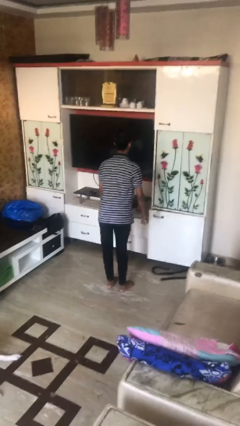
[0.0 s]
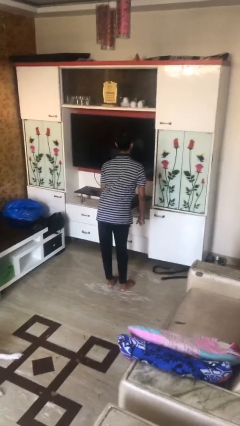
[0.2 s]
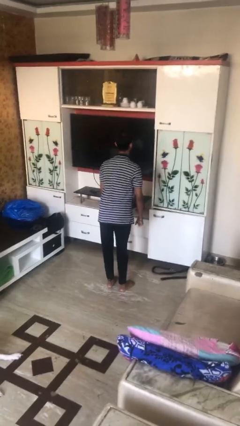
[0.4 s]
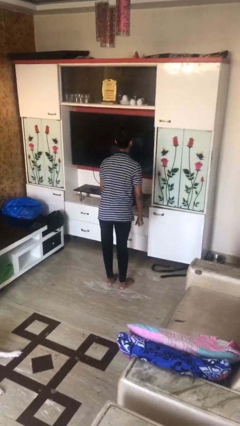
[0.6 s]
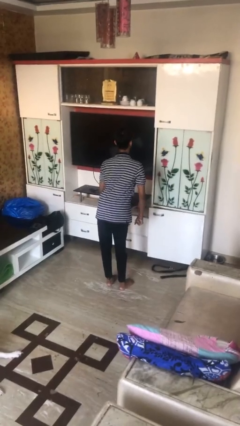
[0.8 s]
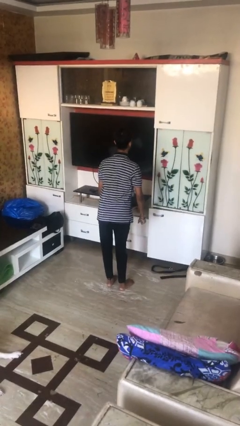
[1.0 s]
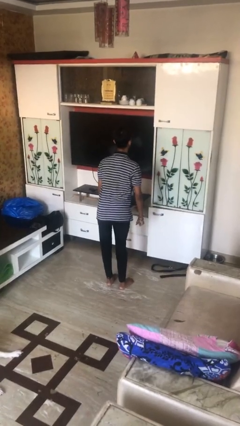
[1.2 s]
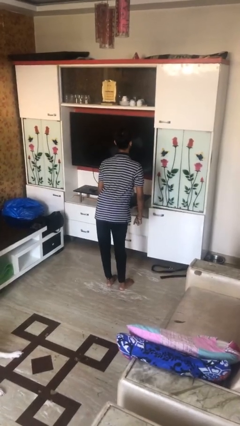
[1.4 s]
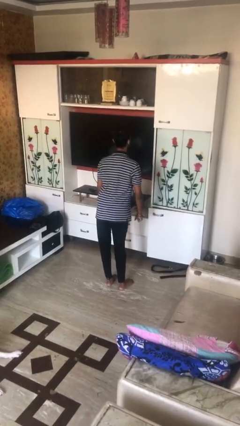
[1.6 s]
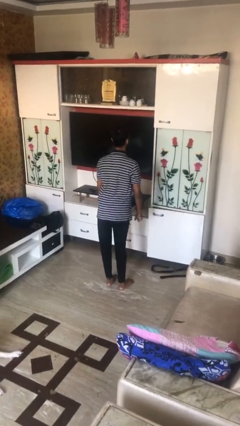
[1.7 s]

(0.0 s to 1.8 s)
person wiggles hips

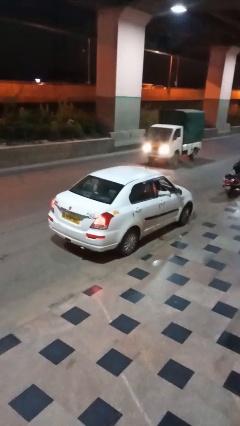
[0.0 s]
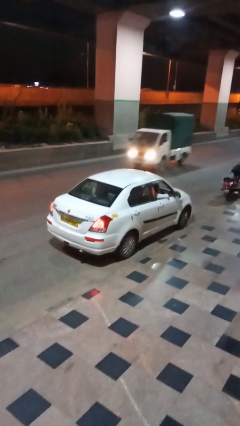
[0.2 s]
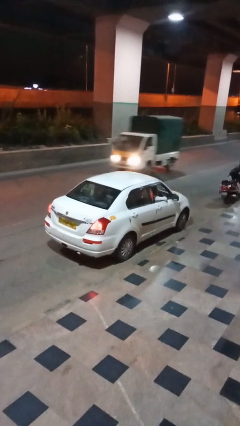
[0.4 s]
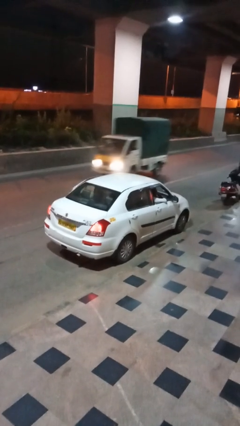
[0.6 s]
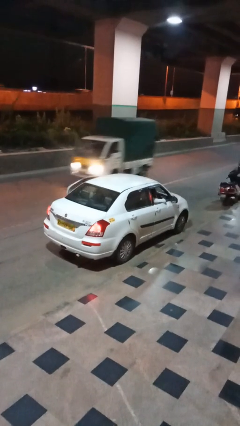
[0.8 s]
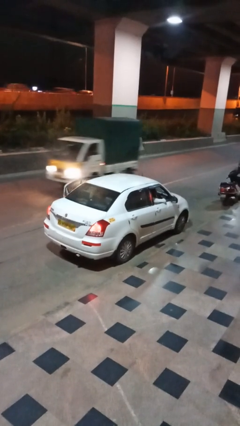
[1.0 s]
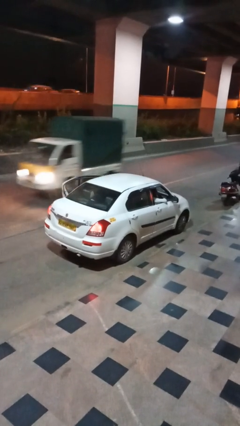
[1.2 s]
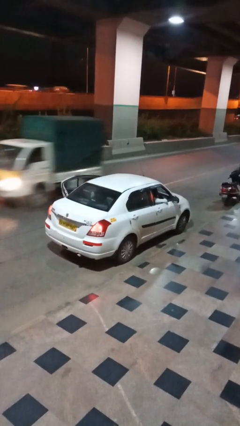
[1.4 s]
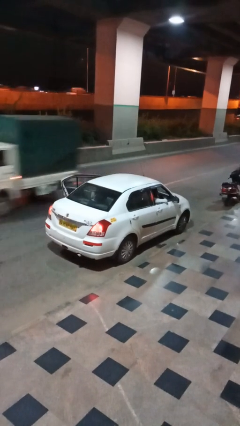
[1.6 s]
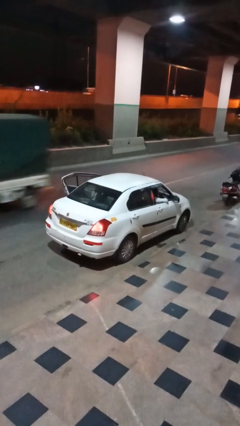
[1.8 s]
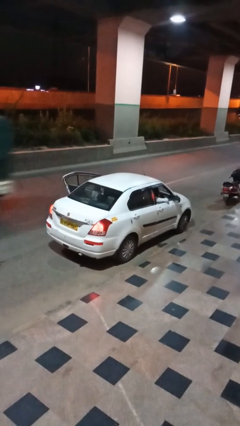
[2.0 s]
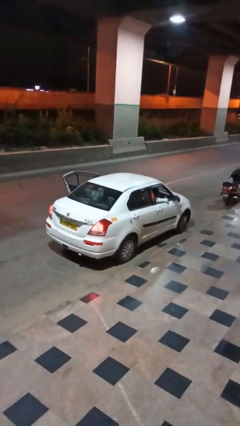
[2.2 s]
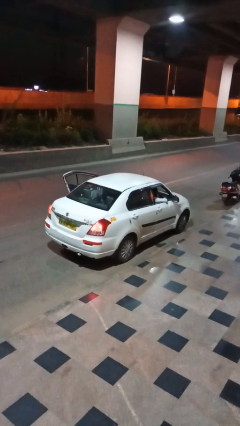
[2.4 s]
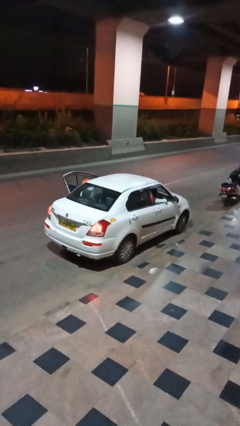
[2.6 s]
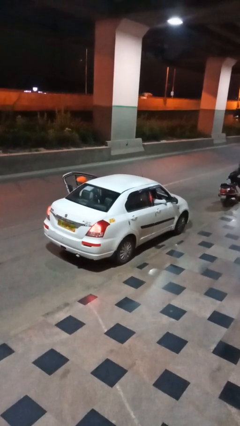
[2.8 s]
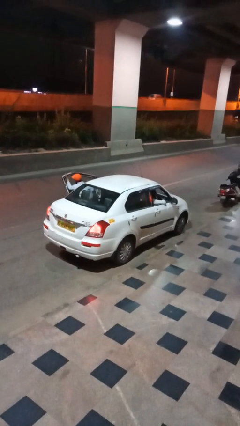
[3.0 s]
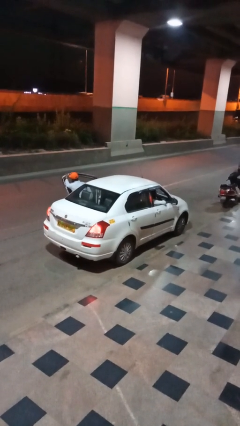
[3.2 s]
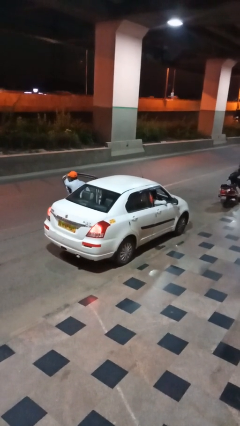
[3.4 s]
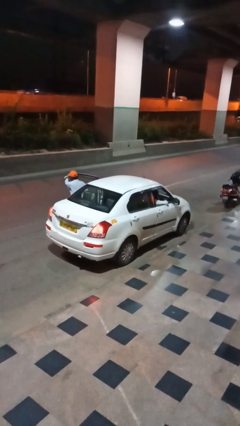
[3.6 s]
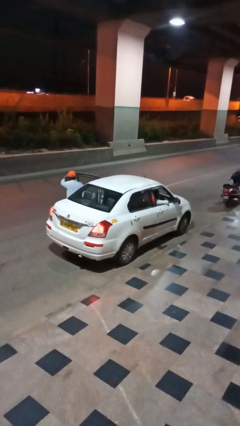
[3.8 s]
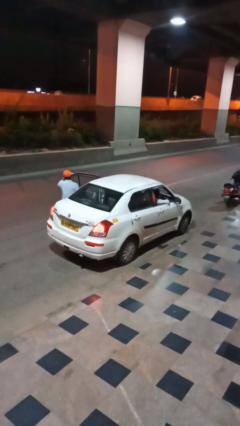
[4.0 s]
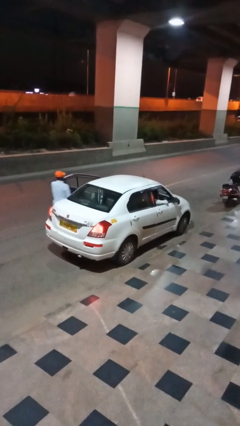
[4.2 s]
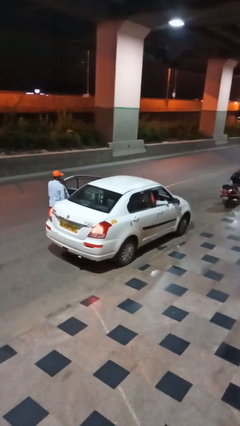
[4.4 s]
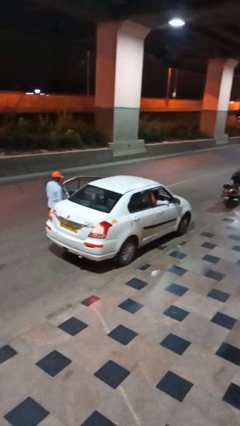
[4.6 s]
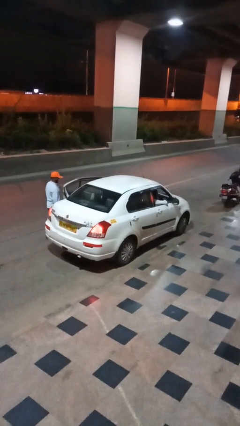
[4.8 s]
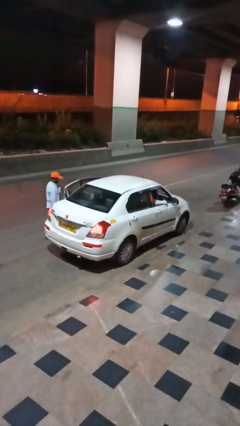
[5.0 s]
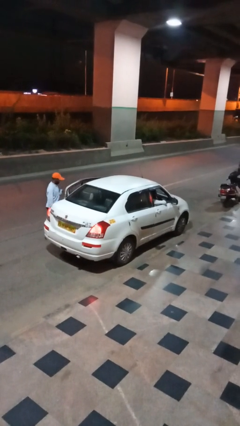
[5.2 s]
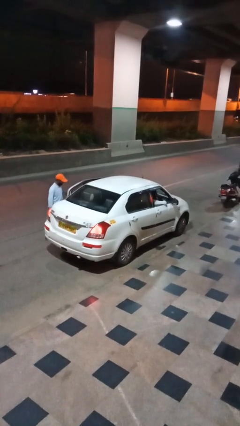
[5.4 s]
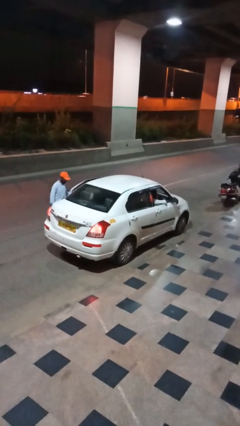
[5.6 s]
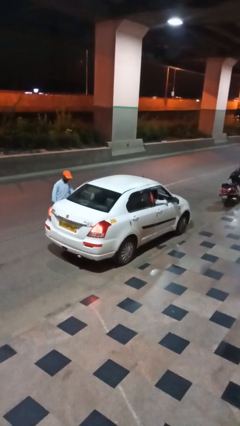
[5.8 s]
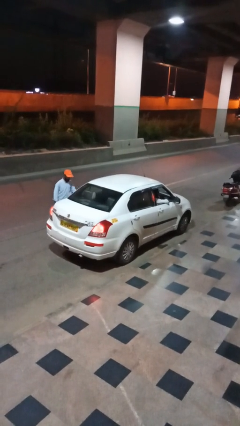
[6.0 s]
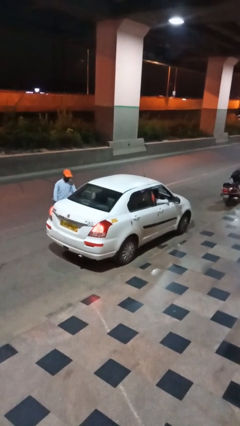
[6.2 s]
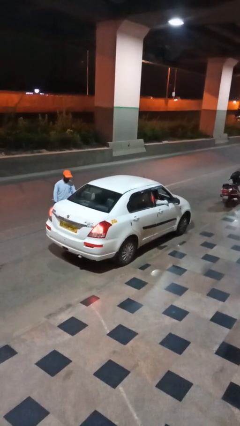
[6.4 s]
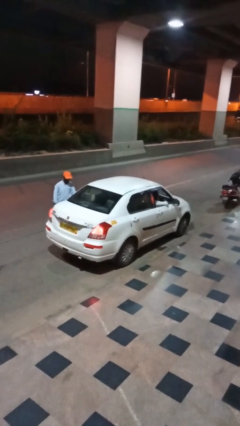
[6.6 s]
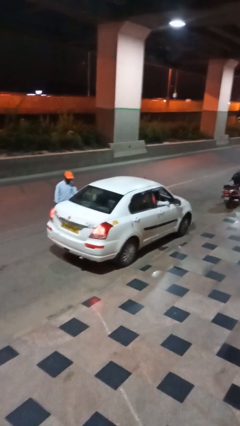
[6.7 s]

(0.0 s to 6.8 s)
car drops off person

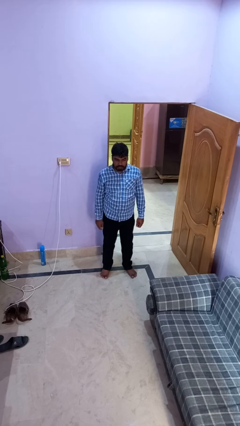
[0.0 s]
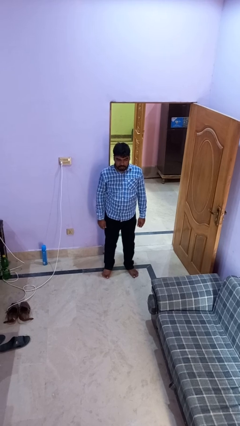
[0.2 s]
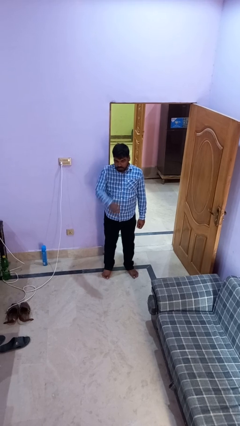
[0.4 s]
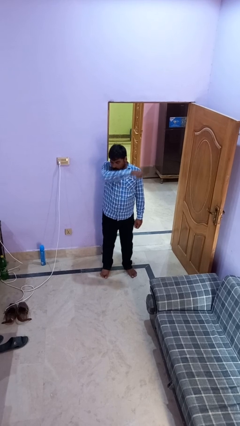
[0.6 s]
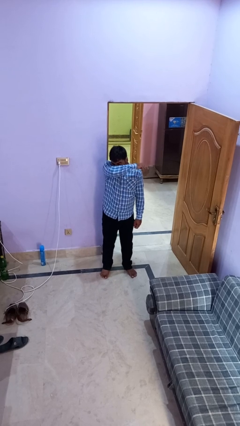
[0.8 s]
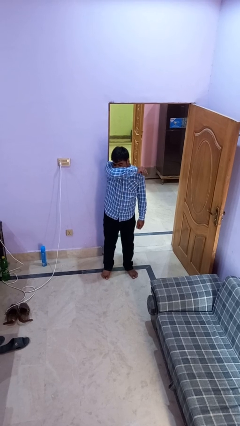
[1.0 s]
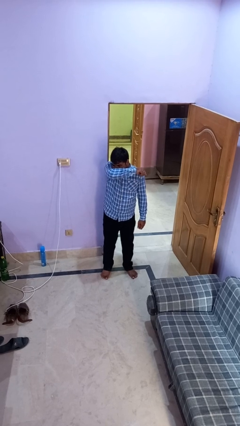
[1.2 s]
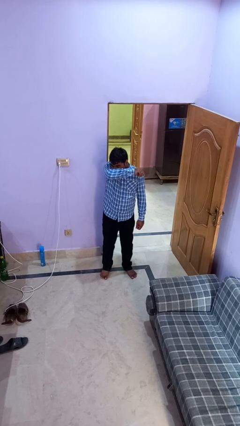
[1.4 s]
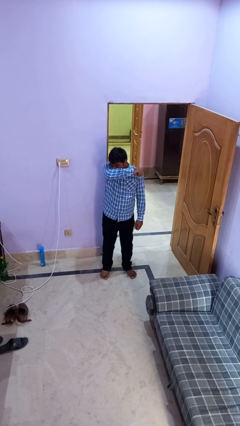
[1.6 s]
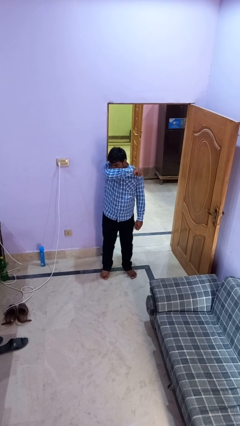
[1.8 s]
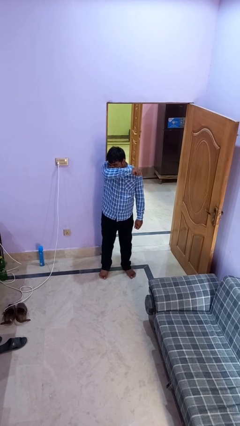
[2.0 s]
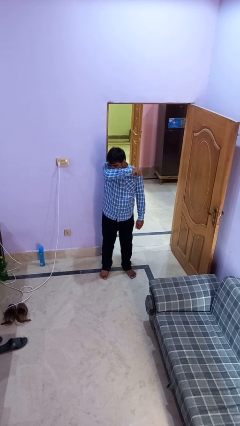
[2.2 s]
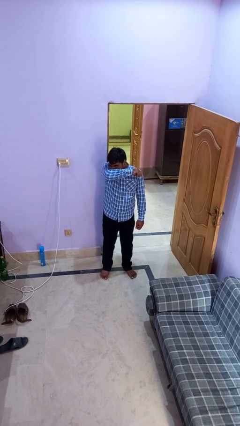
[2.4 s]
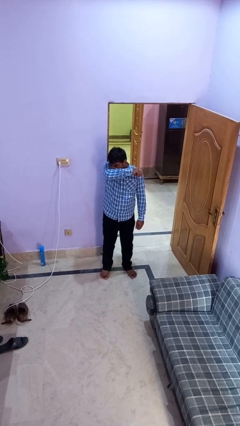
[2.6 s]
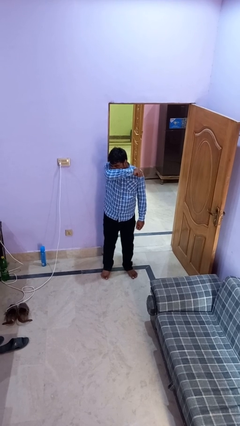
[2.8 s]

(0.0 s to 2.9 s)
person sneezes into arm

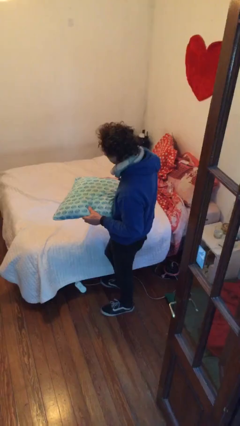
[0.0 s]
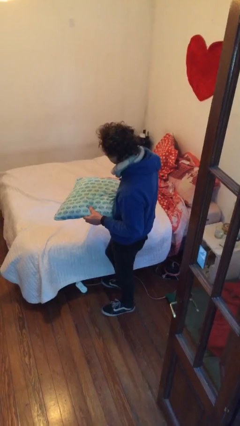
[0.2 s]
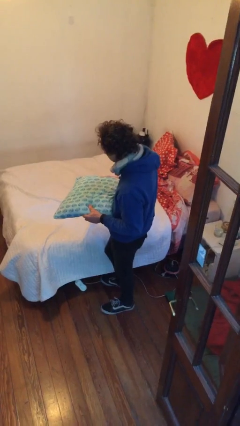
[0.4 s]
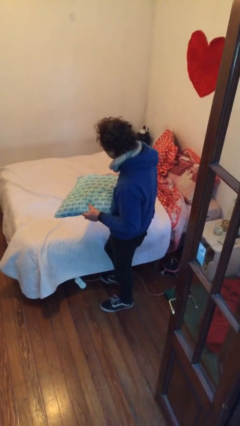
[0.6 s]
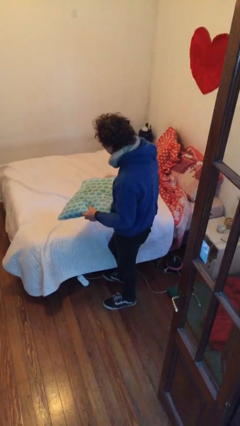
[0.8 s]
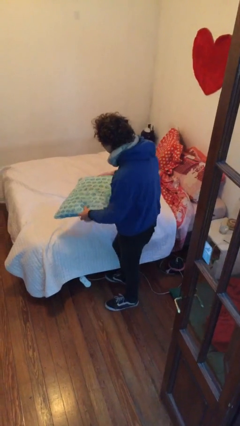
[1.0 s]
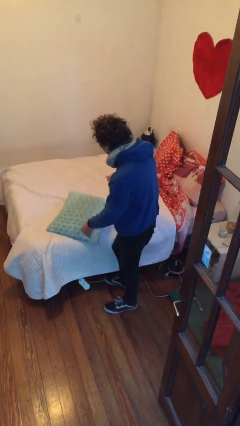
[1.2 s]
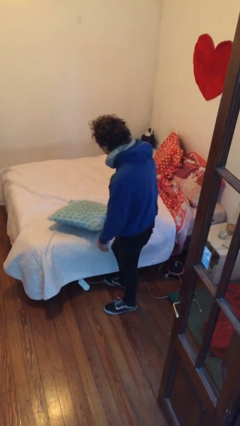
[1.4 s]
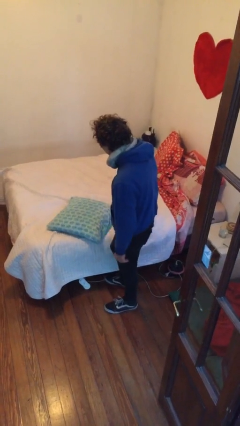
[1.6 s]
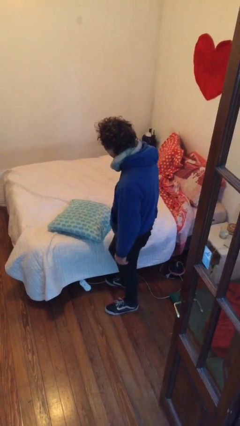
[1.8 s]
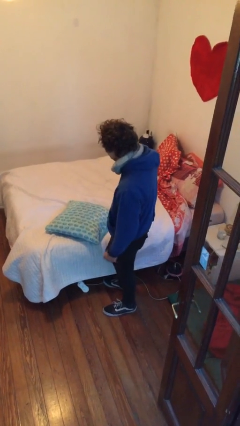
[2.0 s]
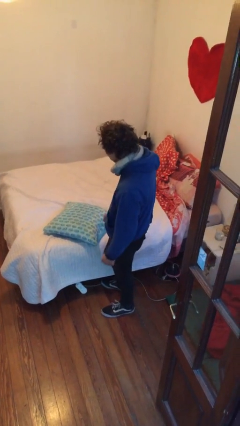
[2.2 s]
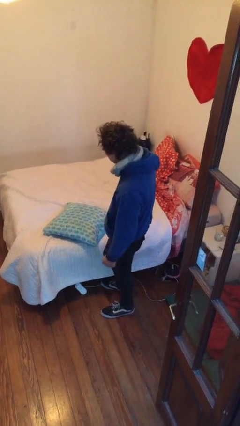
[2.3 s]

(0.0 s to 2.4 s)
person puts down object on bed

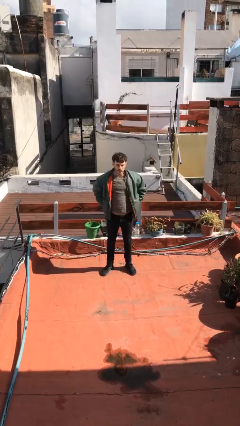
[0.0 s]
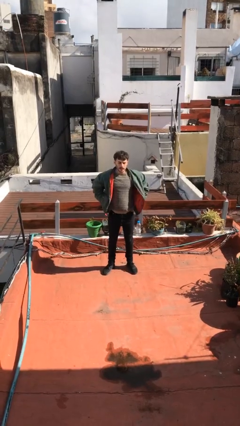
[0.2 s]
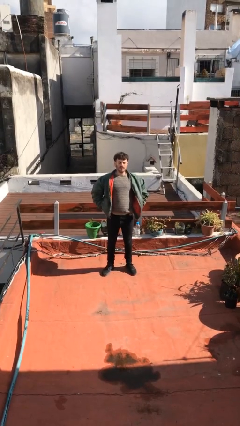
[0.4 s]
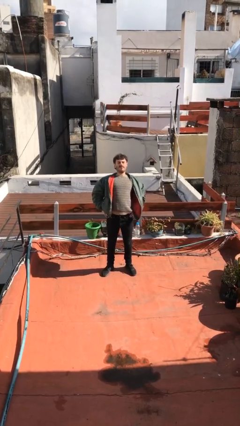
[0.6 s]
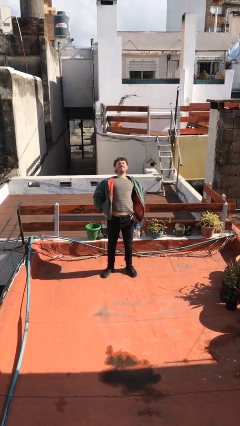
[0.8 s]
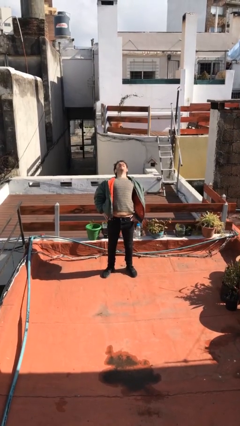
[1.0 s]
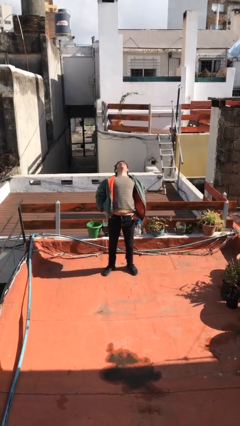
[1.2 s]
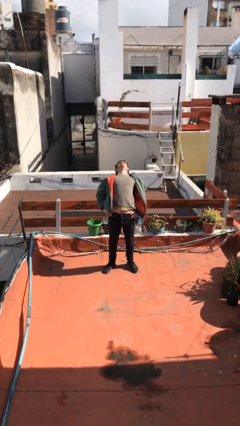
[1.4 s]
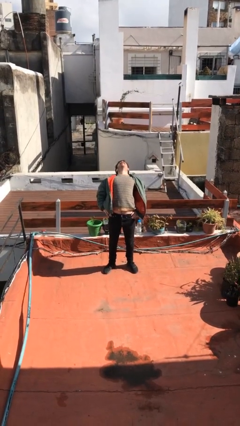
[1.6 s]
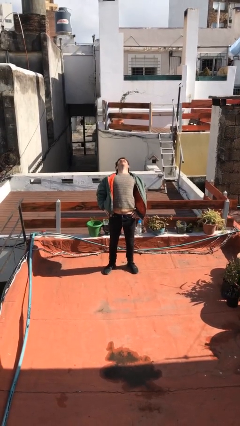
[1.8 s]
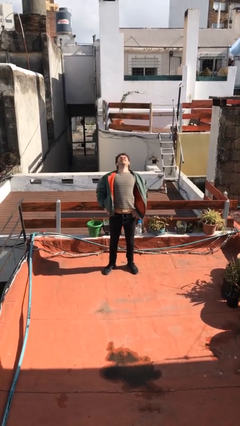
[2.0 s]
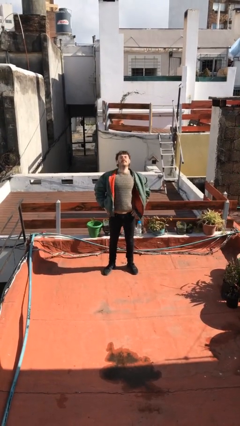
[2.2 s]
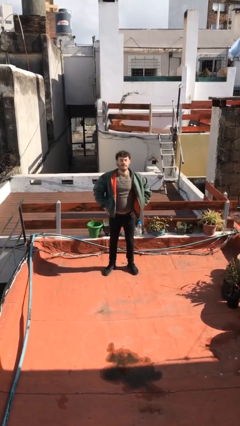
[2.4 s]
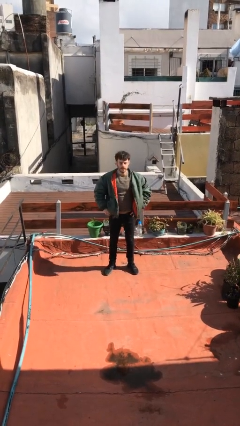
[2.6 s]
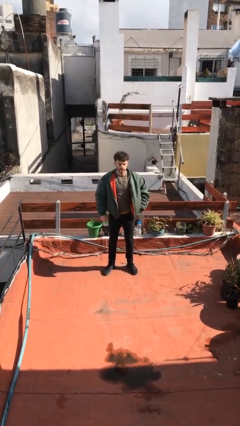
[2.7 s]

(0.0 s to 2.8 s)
person stretches back

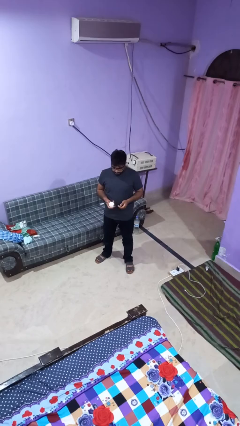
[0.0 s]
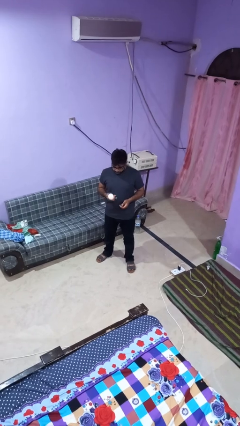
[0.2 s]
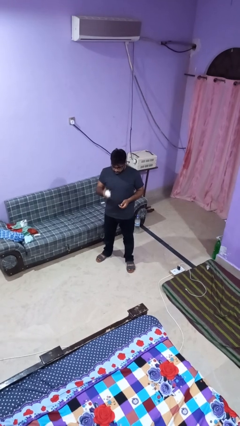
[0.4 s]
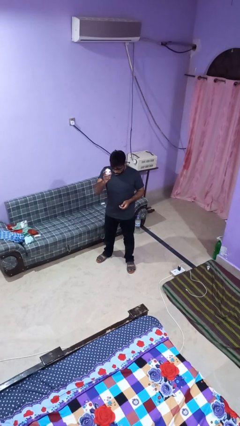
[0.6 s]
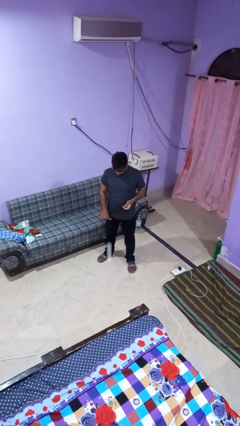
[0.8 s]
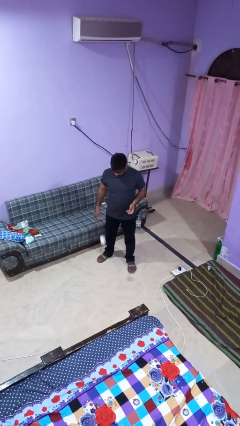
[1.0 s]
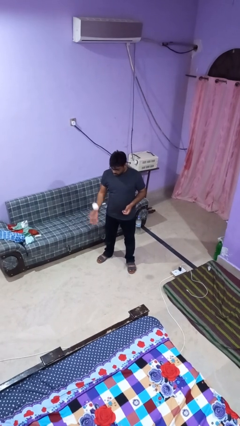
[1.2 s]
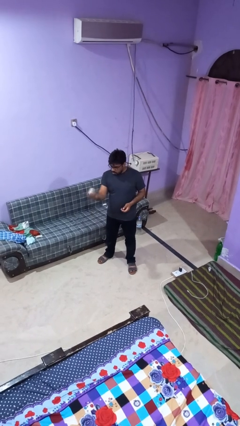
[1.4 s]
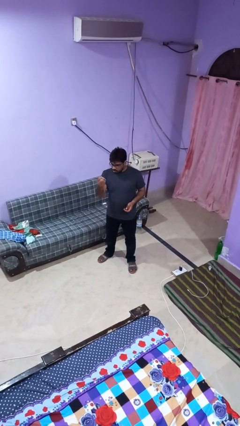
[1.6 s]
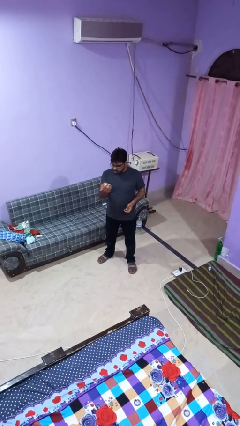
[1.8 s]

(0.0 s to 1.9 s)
person bounces ball on floor
